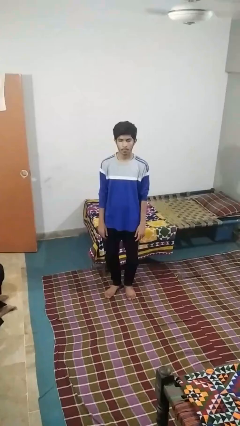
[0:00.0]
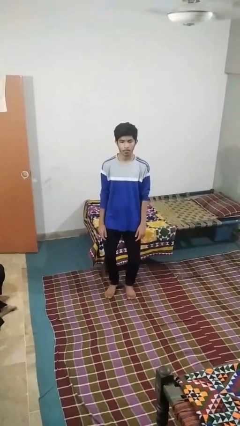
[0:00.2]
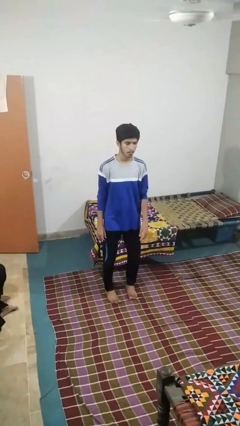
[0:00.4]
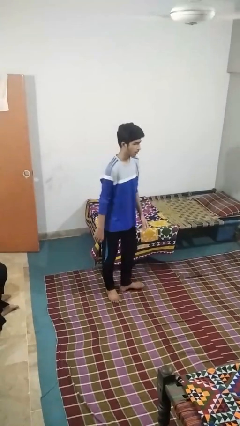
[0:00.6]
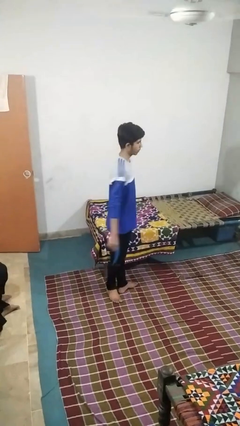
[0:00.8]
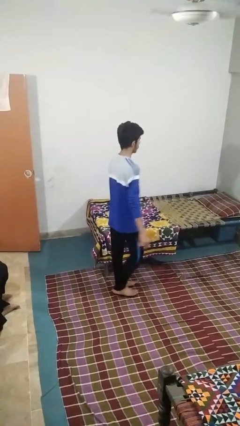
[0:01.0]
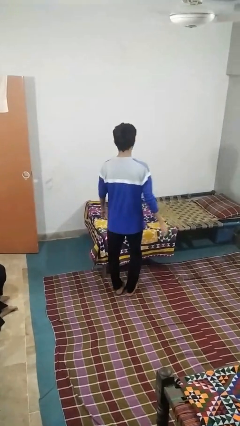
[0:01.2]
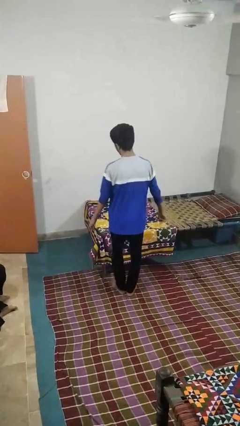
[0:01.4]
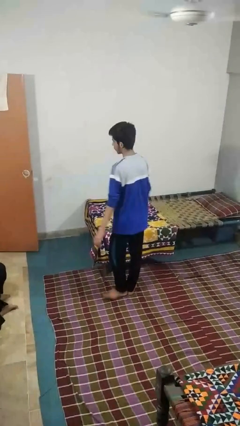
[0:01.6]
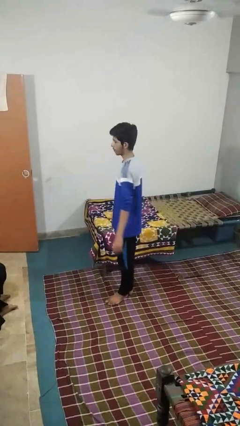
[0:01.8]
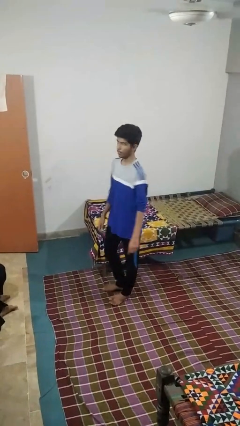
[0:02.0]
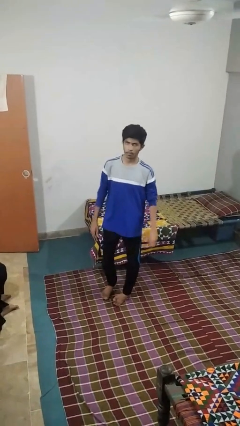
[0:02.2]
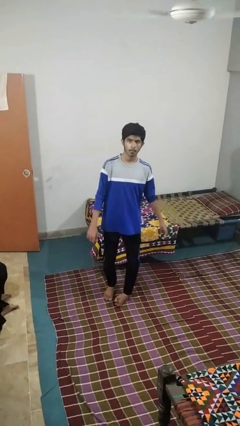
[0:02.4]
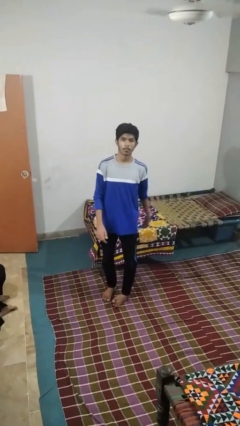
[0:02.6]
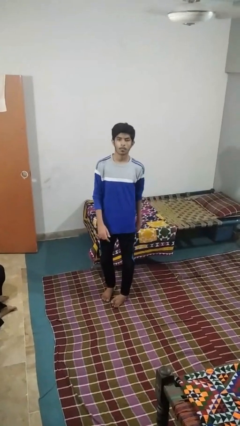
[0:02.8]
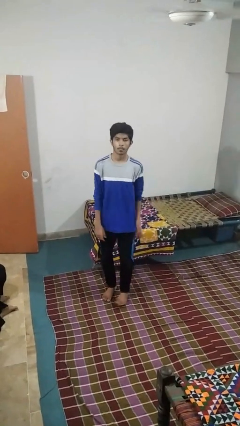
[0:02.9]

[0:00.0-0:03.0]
person twirls

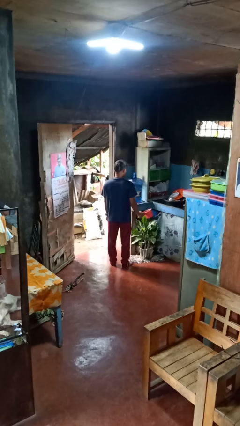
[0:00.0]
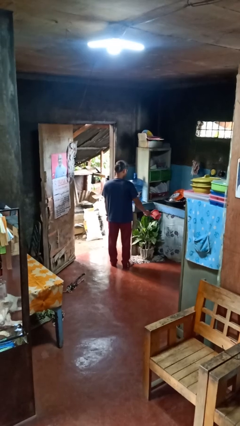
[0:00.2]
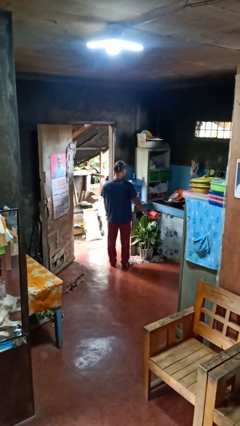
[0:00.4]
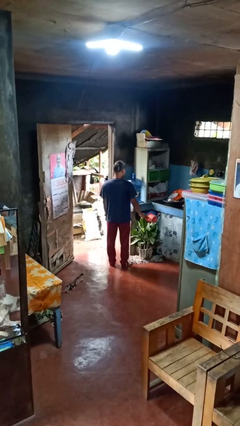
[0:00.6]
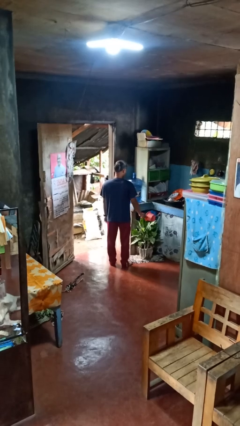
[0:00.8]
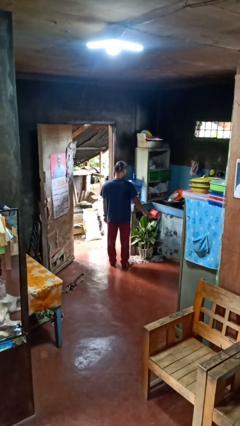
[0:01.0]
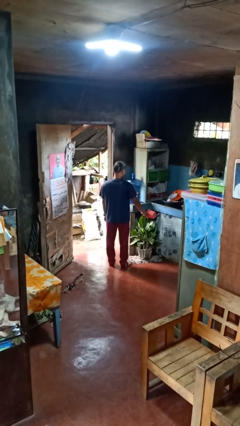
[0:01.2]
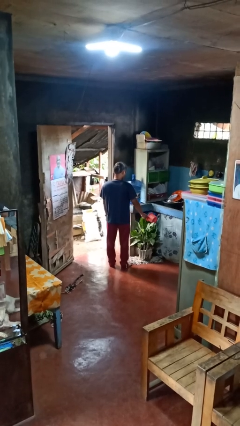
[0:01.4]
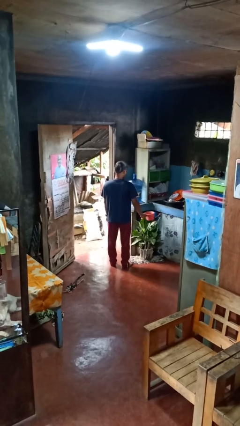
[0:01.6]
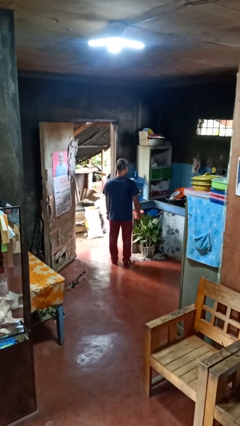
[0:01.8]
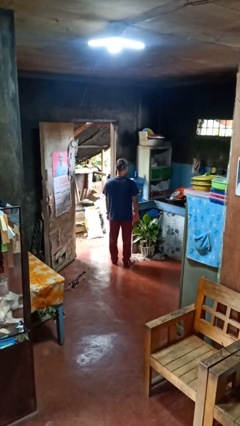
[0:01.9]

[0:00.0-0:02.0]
person waters houseplant

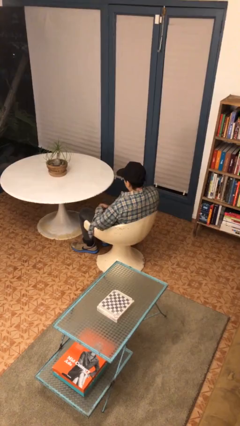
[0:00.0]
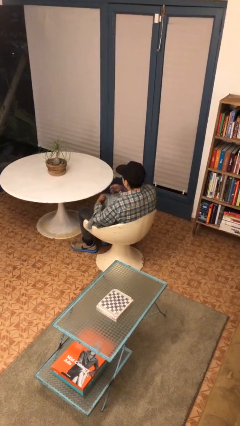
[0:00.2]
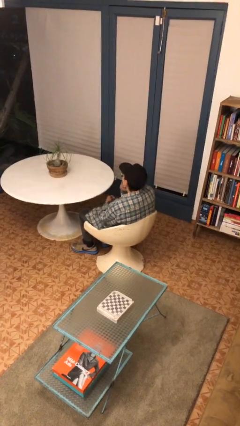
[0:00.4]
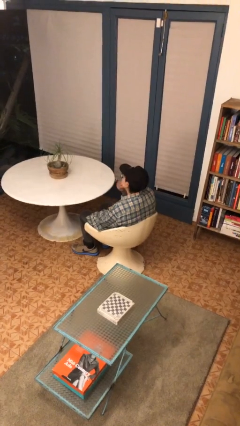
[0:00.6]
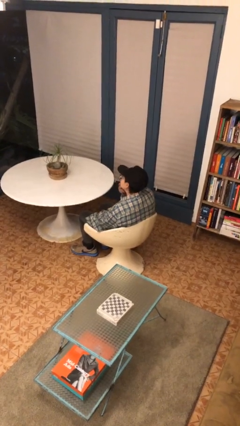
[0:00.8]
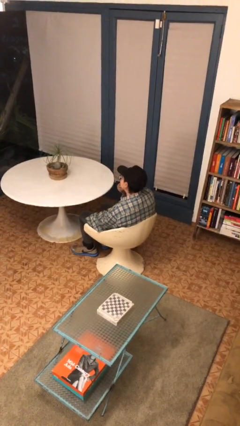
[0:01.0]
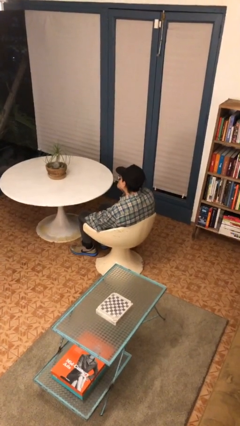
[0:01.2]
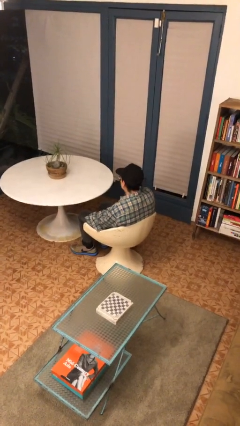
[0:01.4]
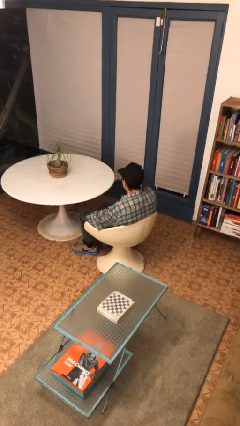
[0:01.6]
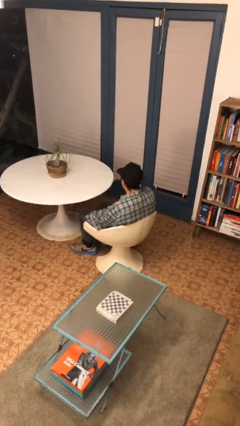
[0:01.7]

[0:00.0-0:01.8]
person strokes chin

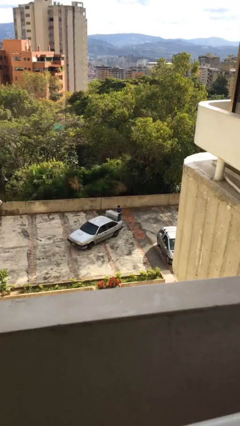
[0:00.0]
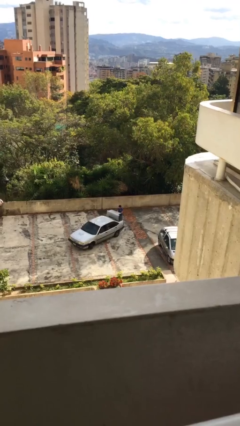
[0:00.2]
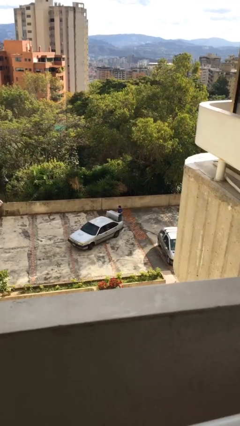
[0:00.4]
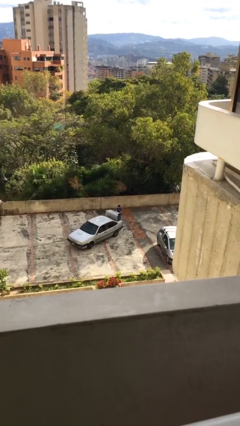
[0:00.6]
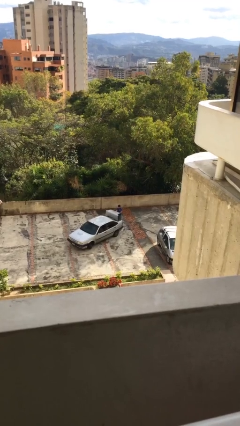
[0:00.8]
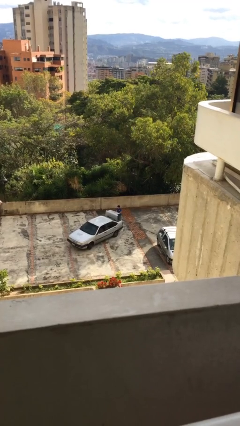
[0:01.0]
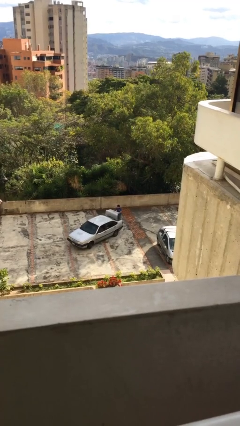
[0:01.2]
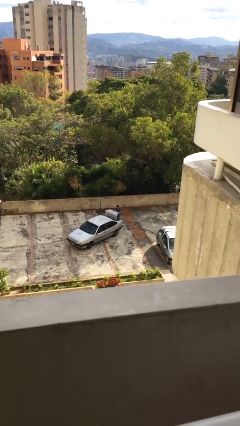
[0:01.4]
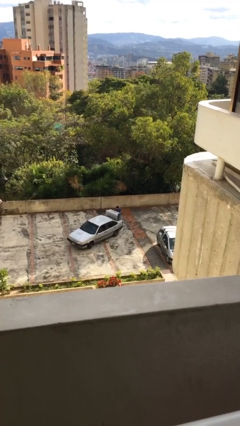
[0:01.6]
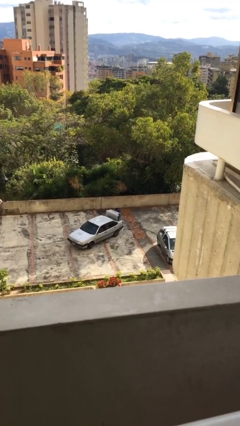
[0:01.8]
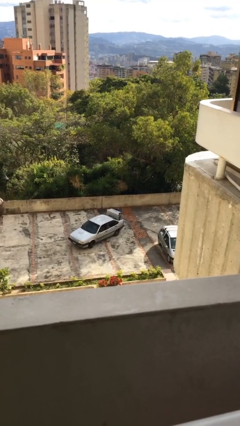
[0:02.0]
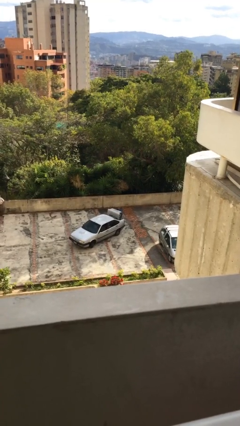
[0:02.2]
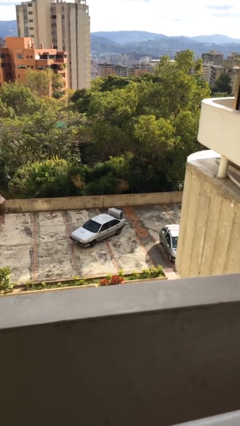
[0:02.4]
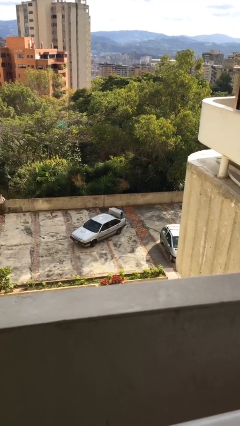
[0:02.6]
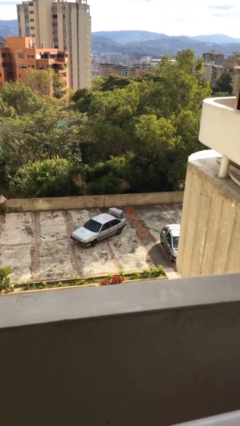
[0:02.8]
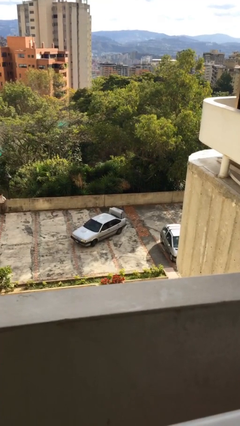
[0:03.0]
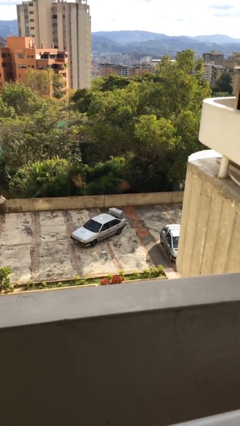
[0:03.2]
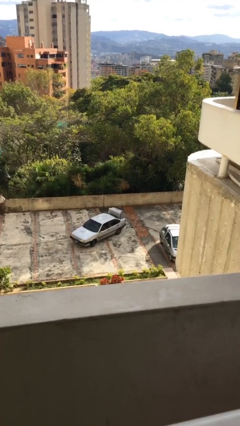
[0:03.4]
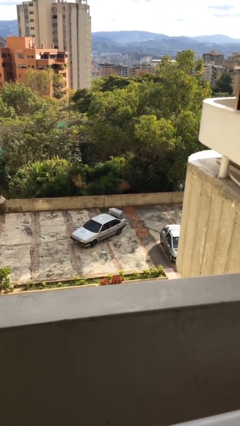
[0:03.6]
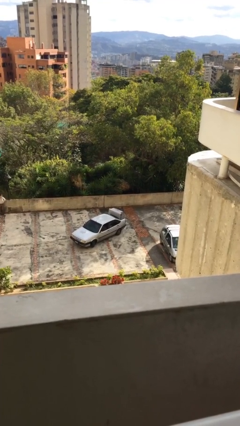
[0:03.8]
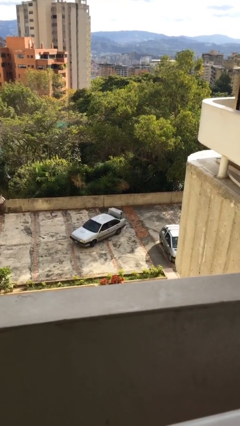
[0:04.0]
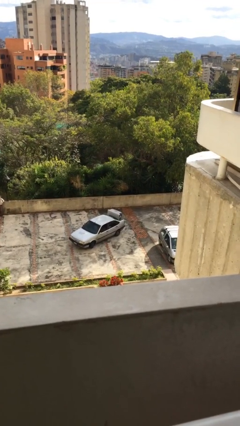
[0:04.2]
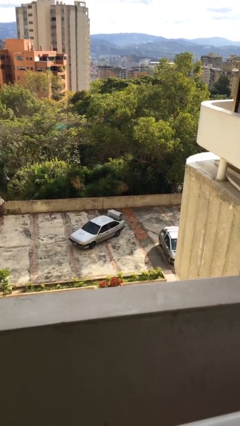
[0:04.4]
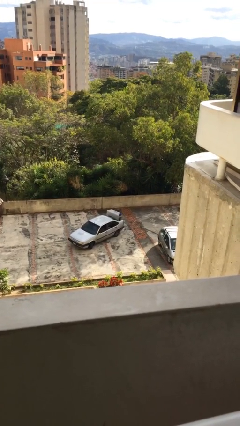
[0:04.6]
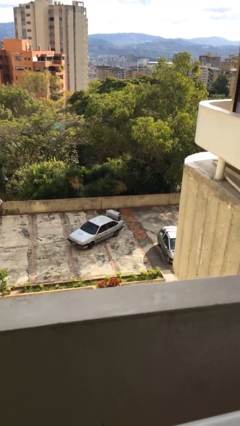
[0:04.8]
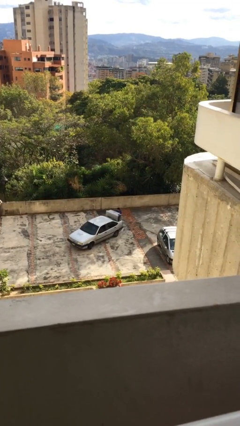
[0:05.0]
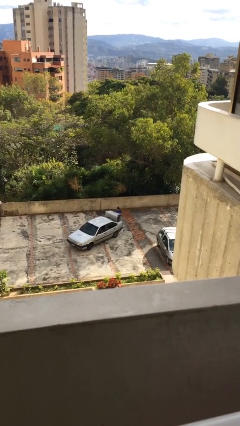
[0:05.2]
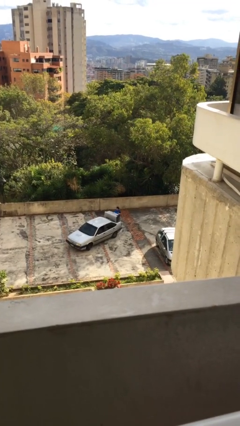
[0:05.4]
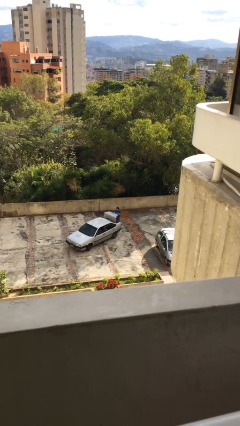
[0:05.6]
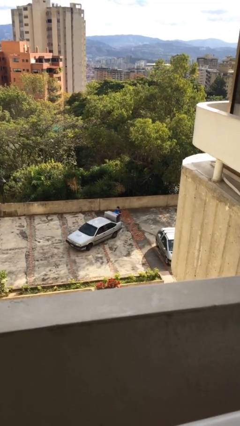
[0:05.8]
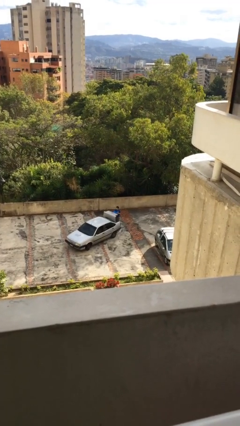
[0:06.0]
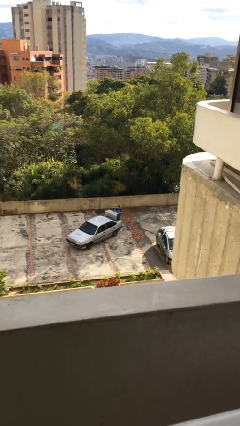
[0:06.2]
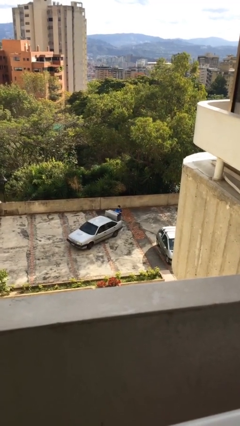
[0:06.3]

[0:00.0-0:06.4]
person unloads car

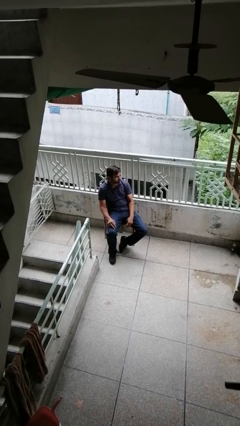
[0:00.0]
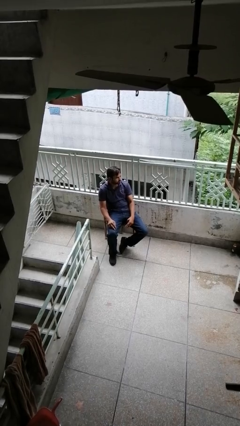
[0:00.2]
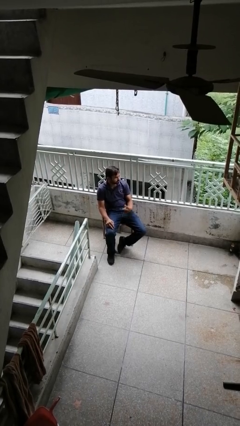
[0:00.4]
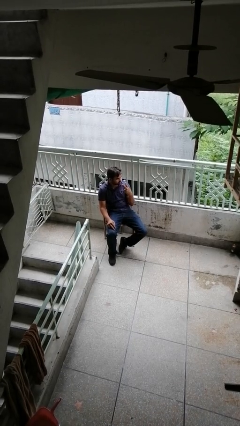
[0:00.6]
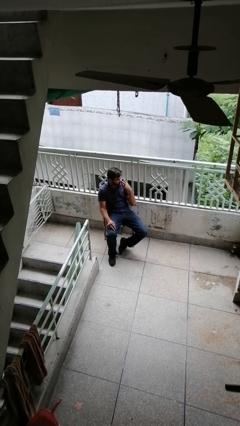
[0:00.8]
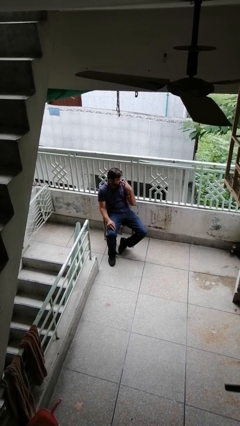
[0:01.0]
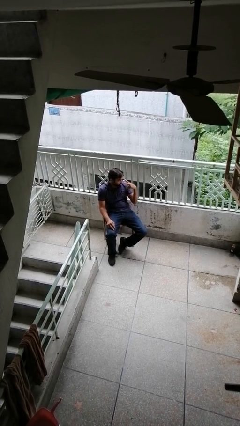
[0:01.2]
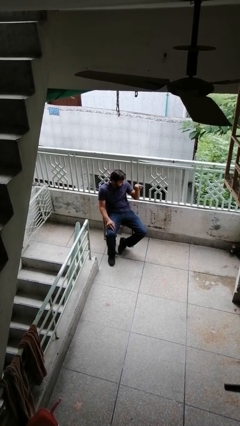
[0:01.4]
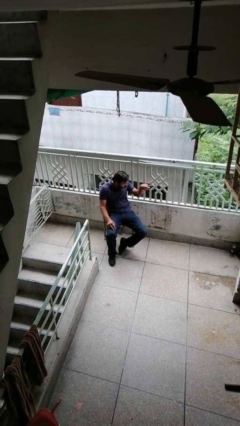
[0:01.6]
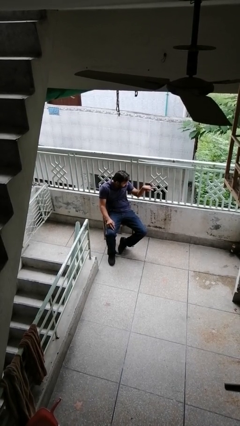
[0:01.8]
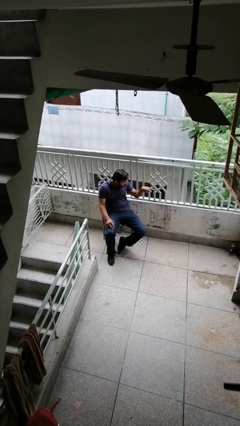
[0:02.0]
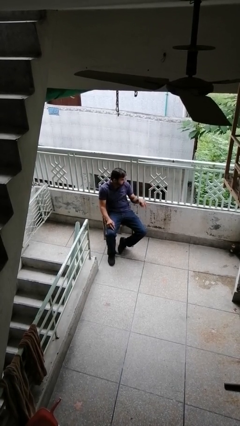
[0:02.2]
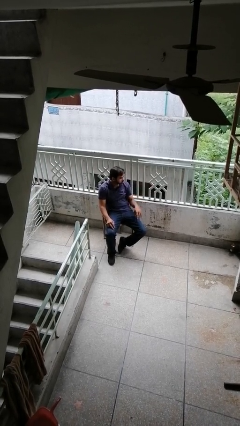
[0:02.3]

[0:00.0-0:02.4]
person gestures watch closely

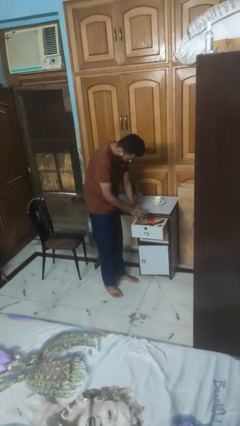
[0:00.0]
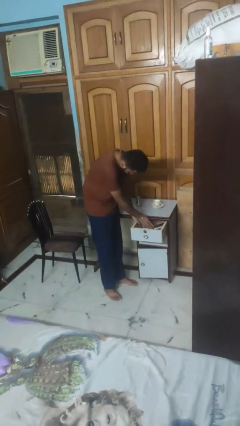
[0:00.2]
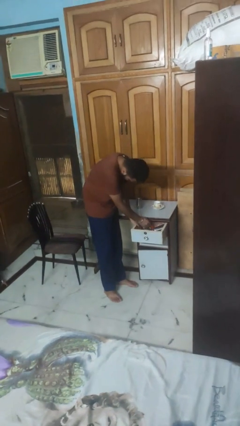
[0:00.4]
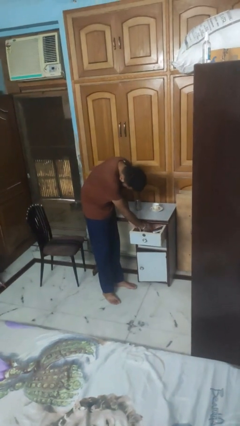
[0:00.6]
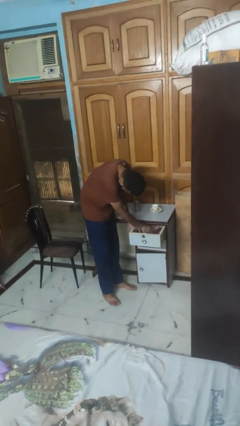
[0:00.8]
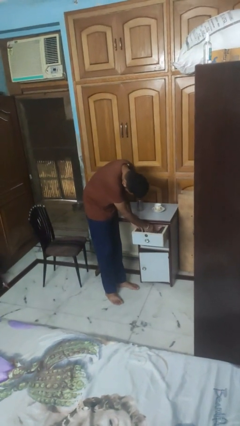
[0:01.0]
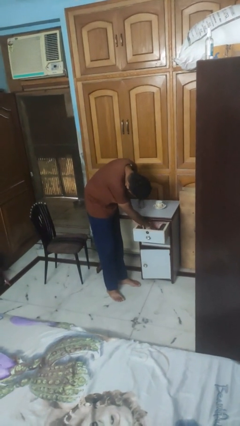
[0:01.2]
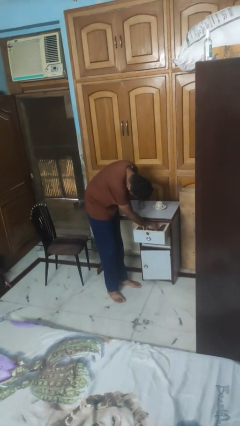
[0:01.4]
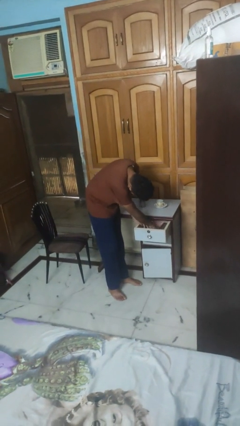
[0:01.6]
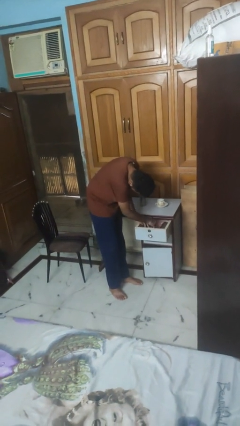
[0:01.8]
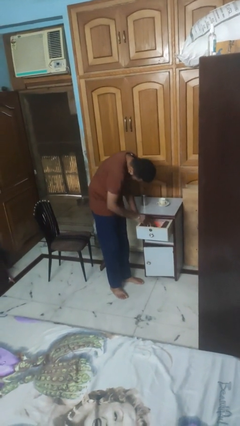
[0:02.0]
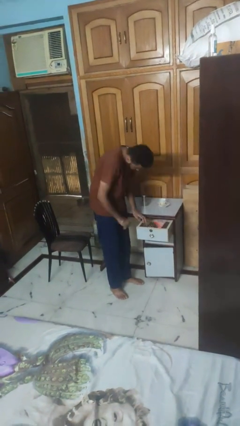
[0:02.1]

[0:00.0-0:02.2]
person searches in kitchen drawer
